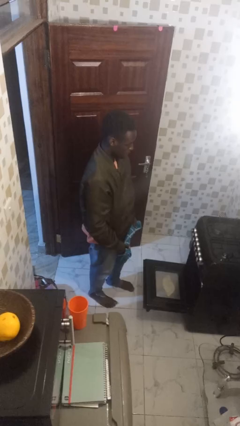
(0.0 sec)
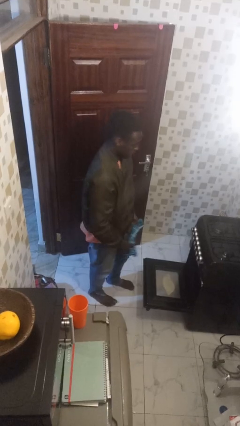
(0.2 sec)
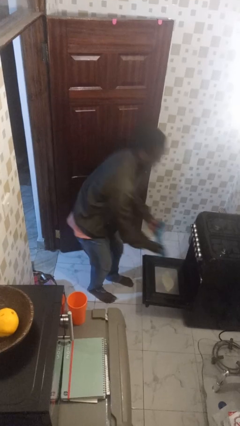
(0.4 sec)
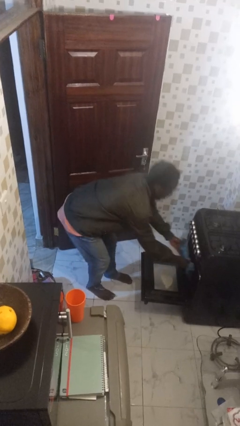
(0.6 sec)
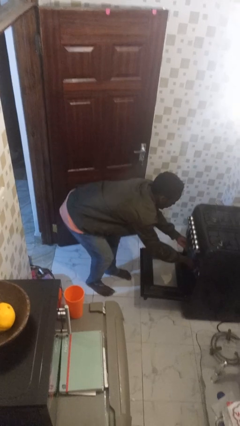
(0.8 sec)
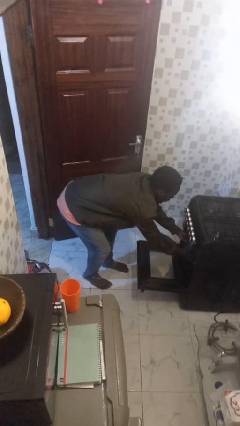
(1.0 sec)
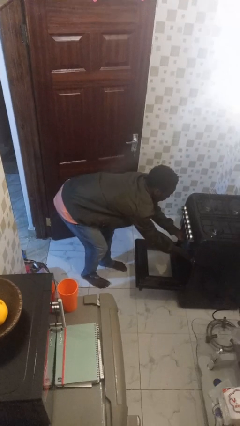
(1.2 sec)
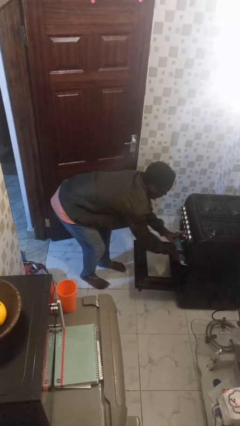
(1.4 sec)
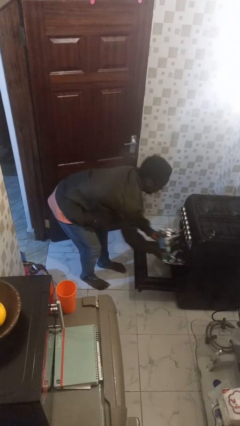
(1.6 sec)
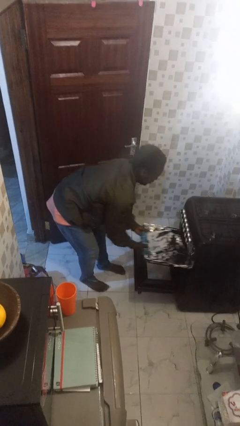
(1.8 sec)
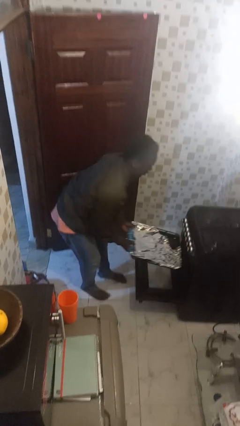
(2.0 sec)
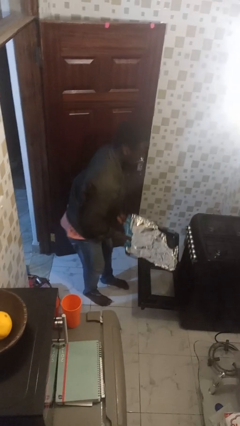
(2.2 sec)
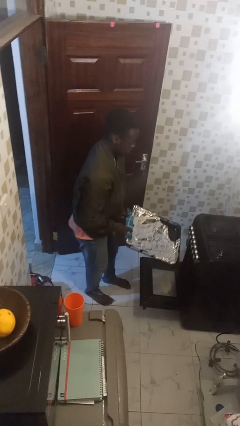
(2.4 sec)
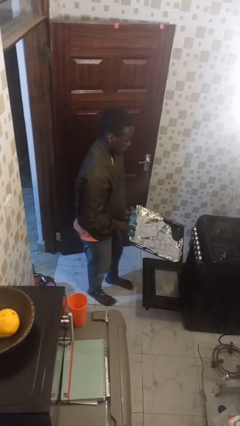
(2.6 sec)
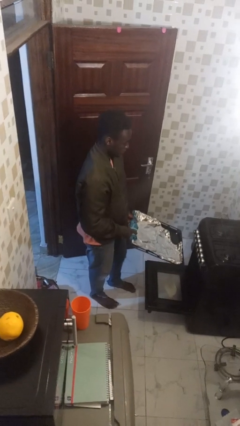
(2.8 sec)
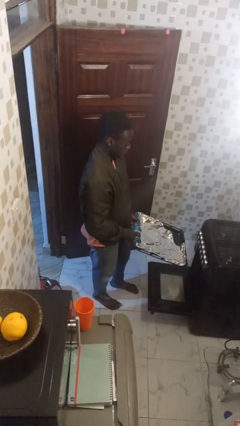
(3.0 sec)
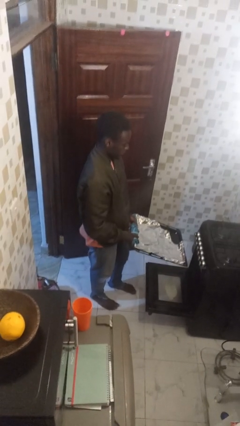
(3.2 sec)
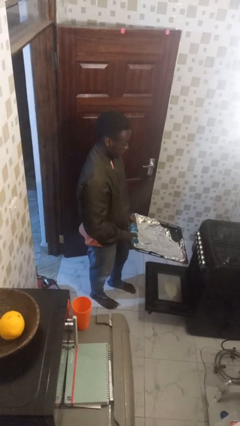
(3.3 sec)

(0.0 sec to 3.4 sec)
person takes object from oven

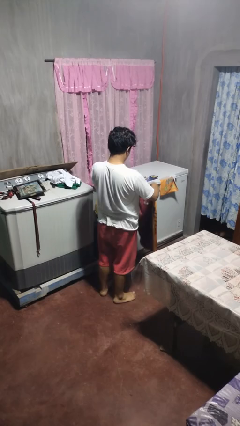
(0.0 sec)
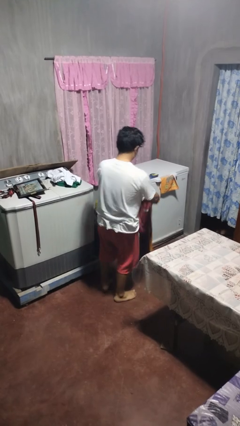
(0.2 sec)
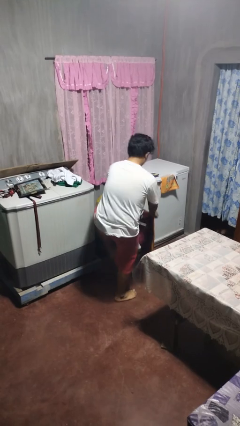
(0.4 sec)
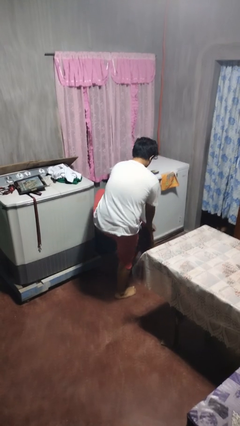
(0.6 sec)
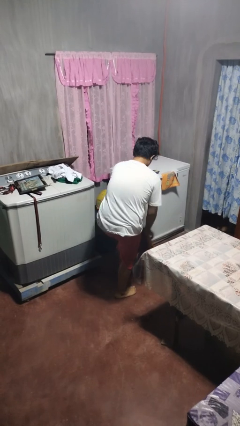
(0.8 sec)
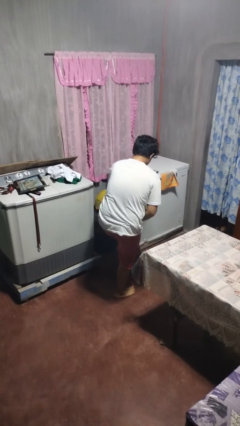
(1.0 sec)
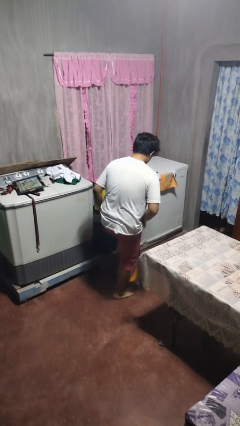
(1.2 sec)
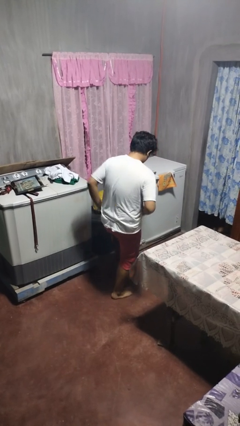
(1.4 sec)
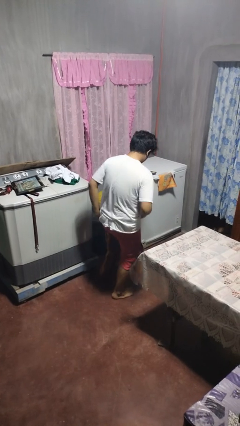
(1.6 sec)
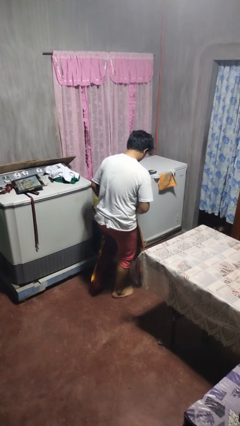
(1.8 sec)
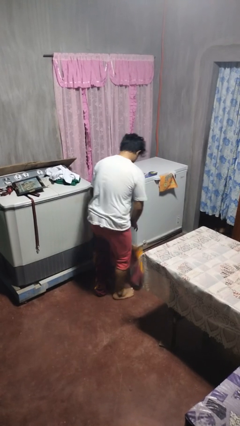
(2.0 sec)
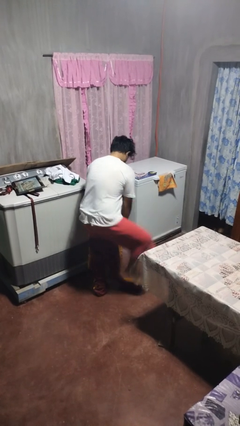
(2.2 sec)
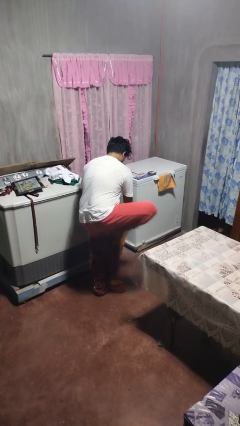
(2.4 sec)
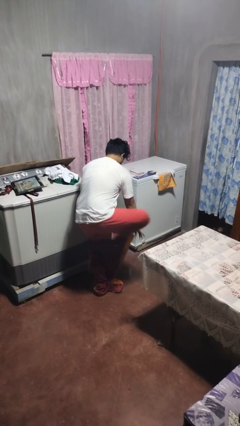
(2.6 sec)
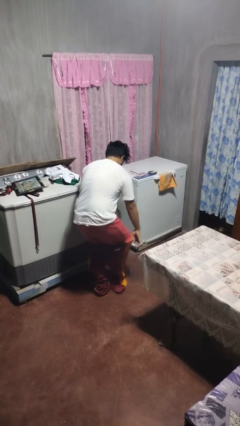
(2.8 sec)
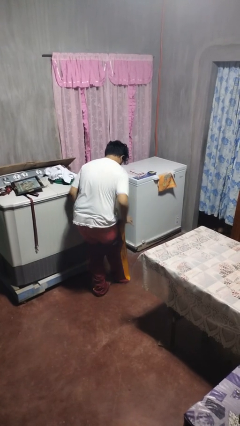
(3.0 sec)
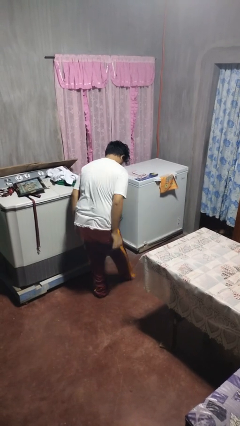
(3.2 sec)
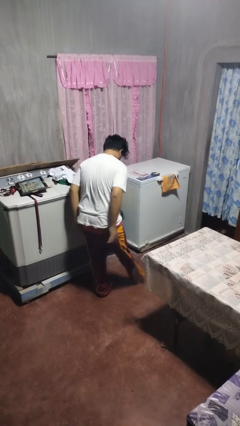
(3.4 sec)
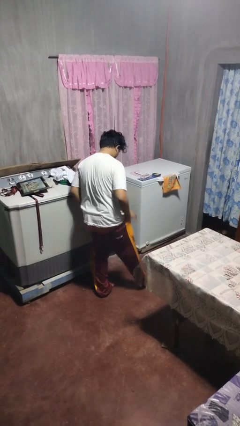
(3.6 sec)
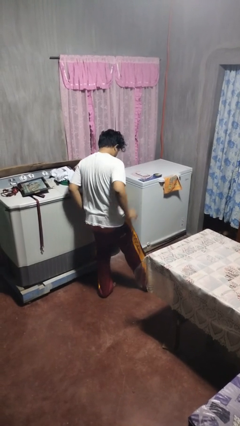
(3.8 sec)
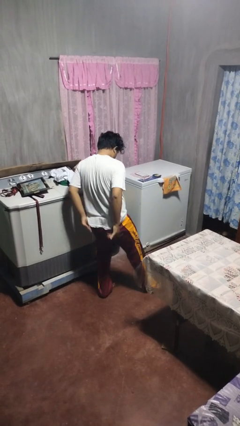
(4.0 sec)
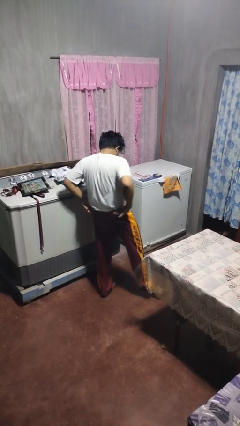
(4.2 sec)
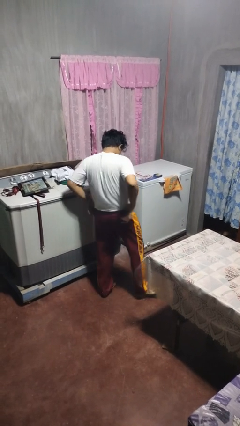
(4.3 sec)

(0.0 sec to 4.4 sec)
person puts on pants

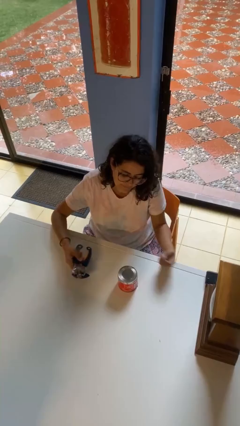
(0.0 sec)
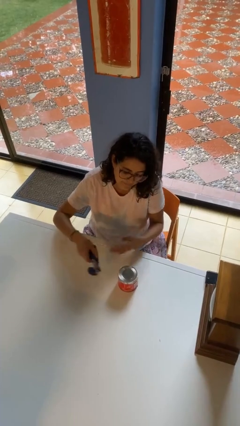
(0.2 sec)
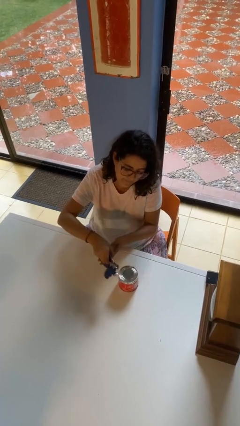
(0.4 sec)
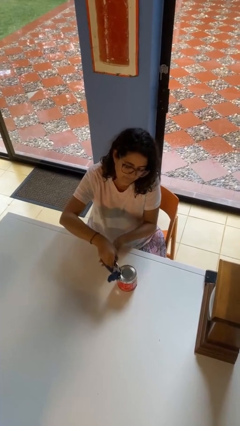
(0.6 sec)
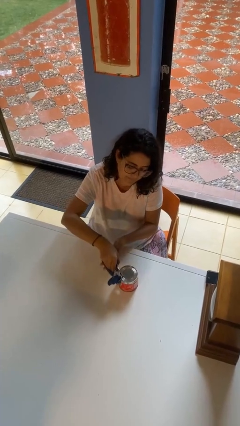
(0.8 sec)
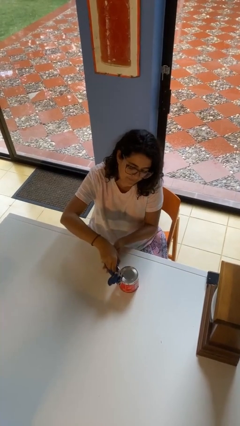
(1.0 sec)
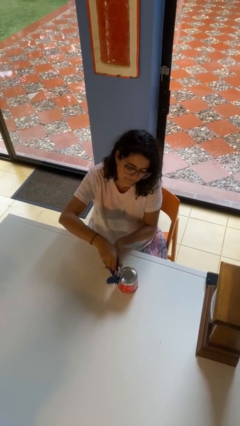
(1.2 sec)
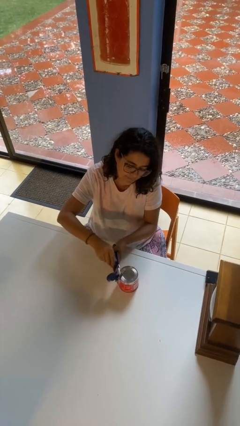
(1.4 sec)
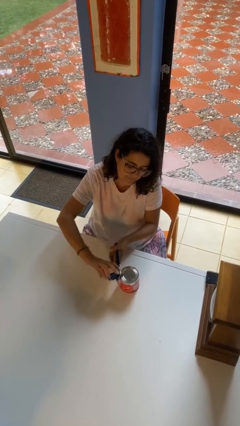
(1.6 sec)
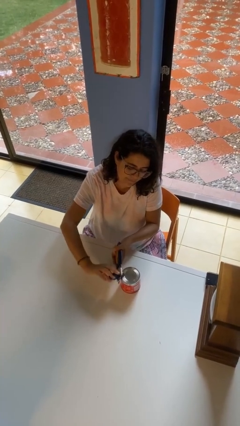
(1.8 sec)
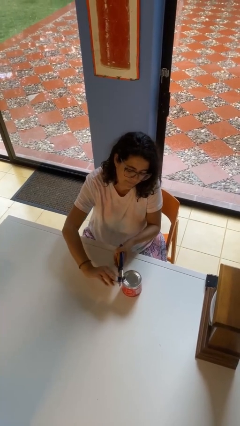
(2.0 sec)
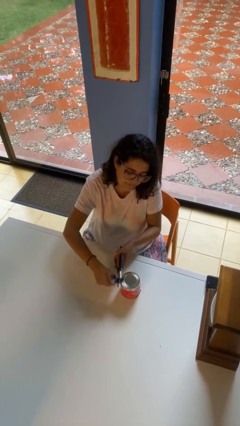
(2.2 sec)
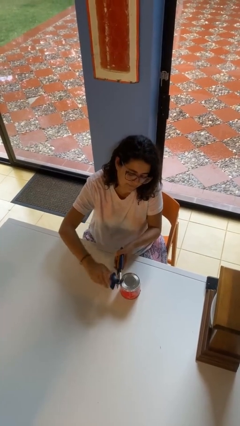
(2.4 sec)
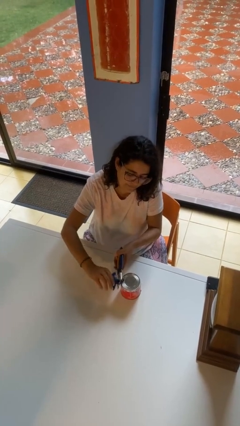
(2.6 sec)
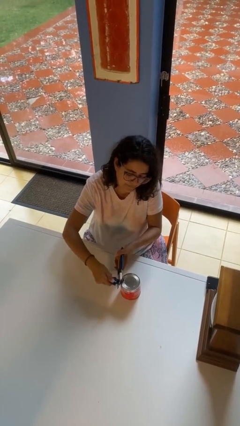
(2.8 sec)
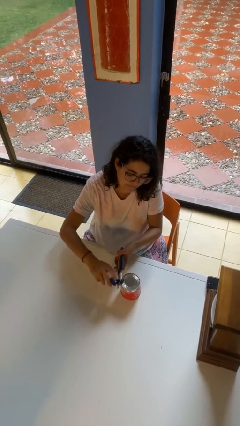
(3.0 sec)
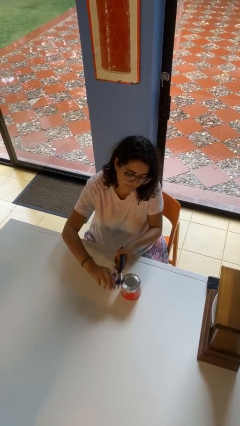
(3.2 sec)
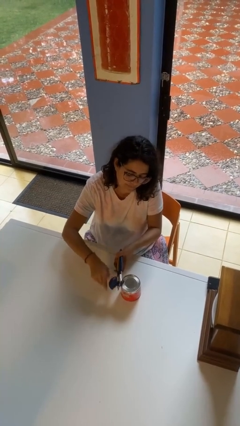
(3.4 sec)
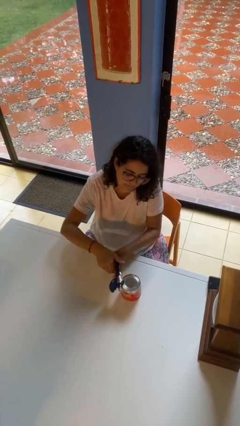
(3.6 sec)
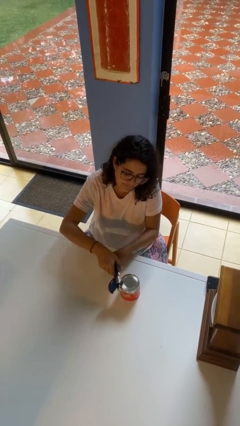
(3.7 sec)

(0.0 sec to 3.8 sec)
person opens can with can opener

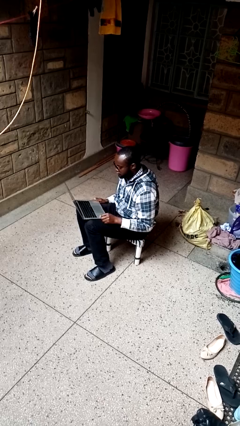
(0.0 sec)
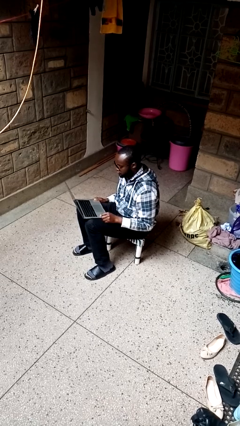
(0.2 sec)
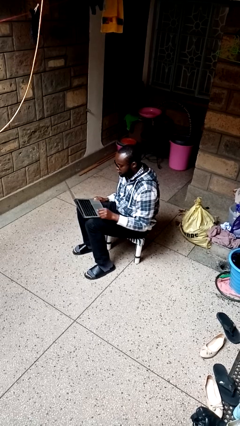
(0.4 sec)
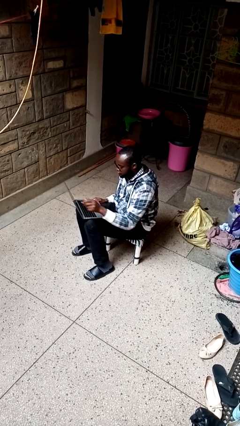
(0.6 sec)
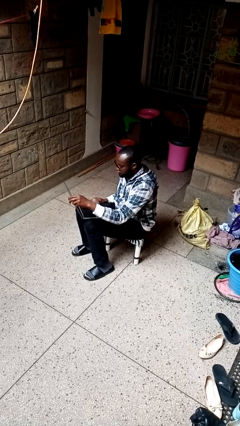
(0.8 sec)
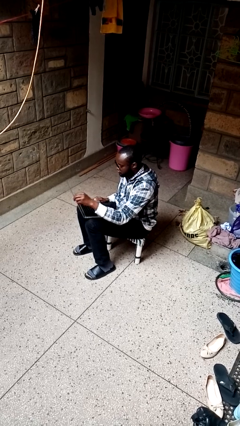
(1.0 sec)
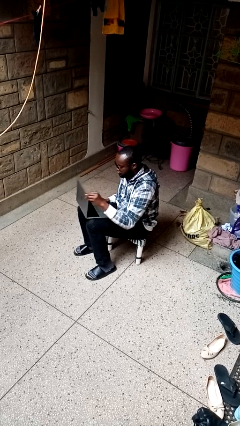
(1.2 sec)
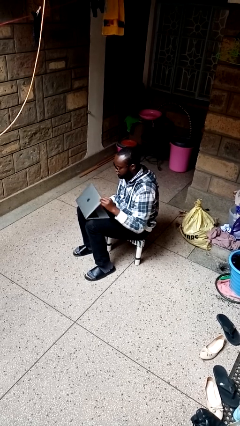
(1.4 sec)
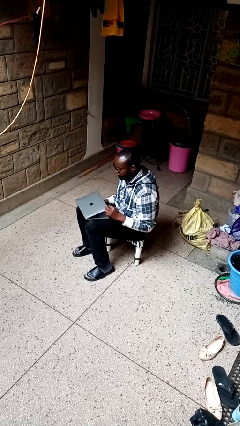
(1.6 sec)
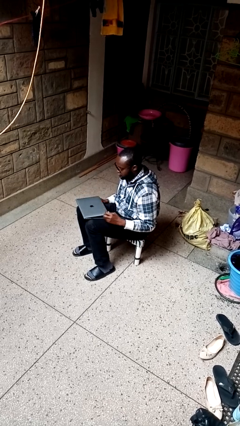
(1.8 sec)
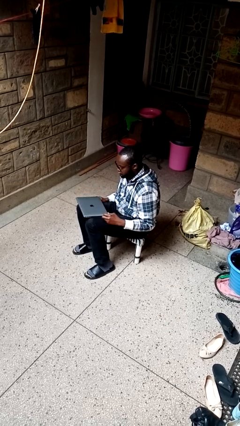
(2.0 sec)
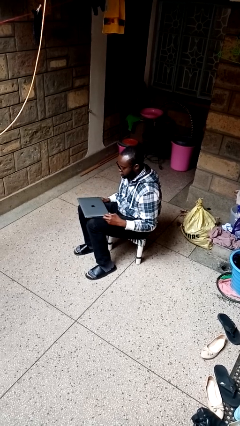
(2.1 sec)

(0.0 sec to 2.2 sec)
person opens laptop

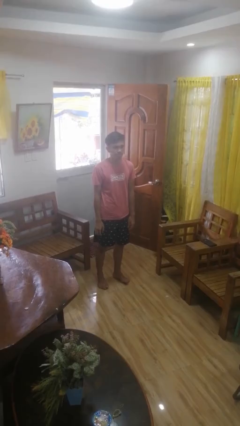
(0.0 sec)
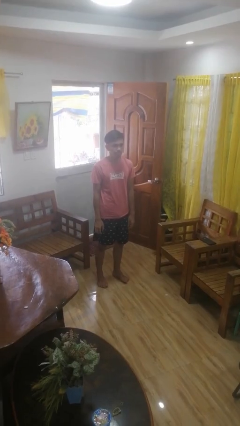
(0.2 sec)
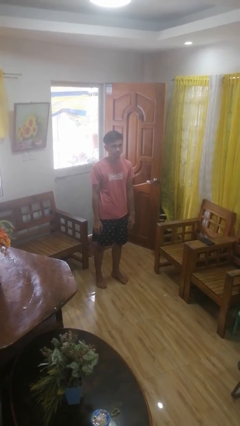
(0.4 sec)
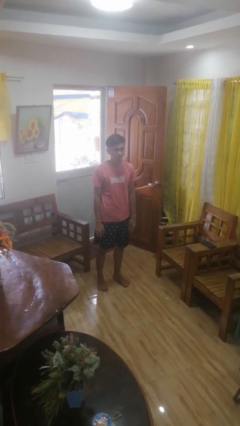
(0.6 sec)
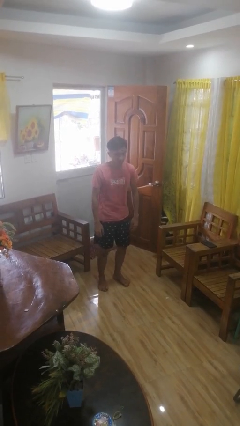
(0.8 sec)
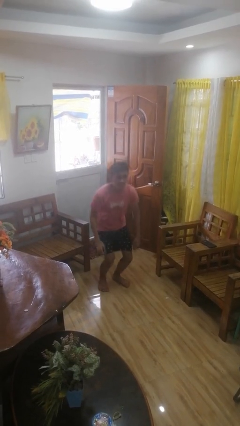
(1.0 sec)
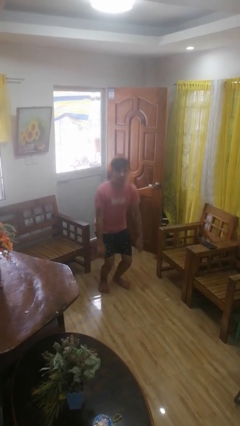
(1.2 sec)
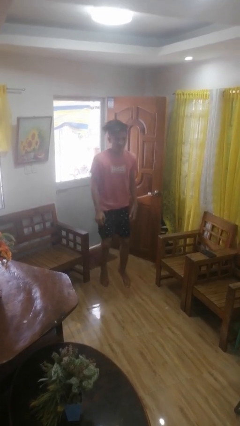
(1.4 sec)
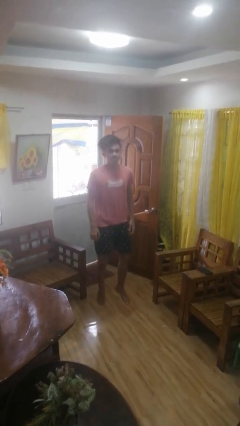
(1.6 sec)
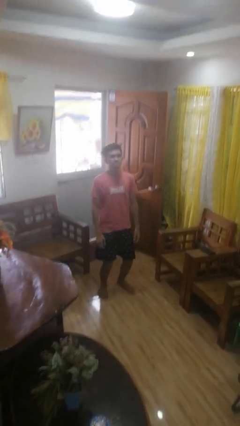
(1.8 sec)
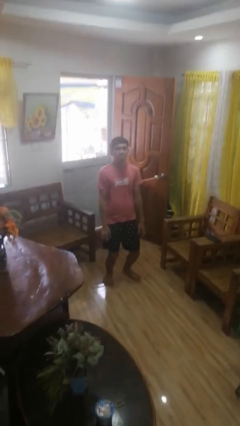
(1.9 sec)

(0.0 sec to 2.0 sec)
person jumps

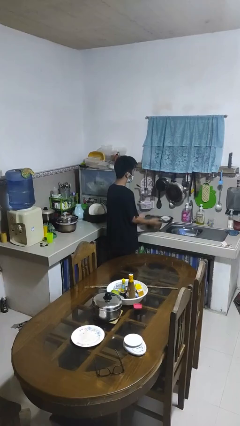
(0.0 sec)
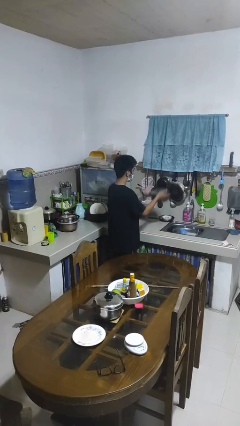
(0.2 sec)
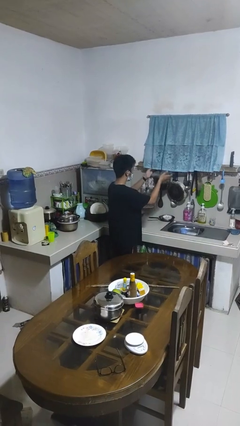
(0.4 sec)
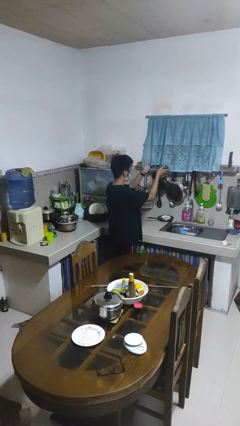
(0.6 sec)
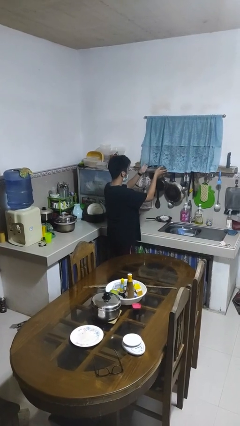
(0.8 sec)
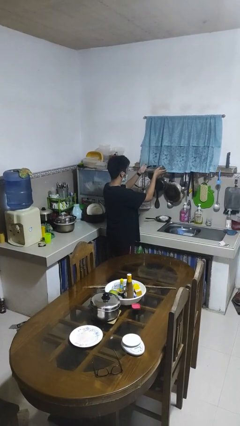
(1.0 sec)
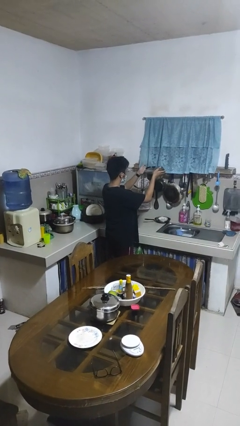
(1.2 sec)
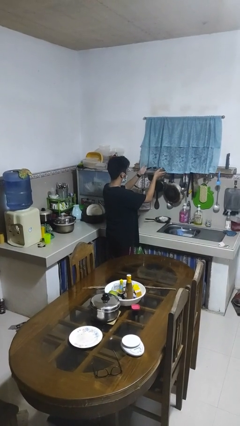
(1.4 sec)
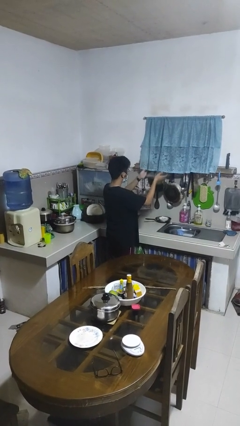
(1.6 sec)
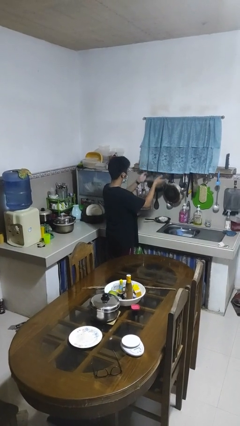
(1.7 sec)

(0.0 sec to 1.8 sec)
person picks up object from countertop
